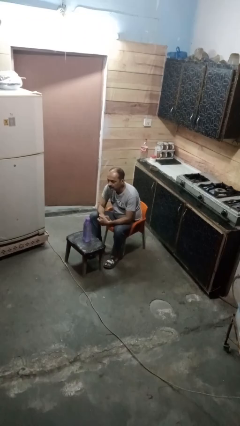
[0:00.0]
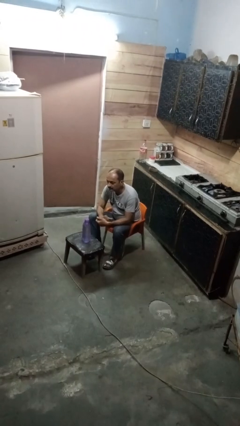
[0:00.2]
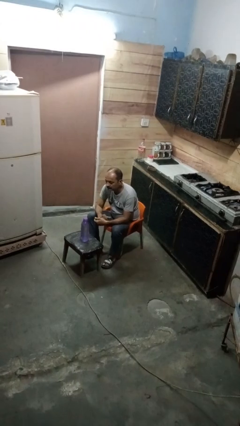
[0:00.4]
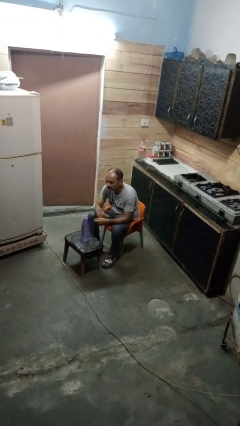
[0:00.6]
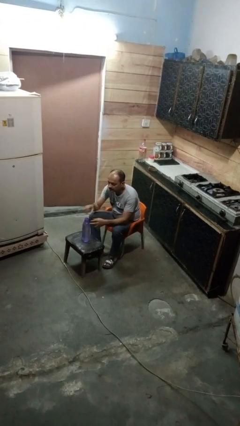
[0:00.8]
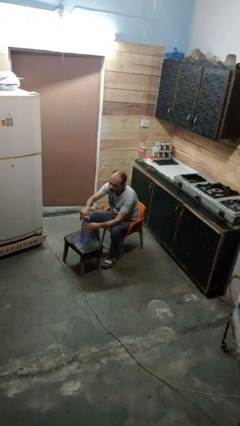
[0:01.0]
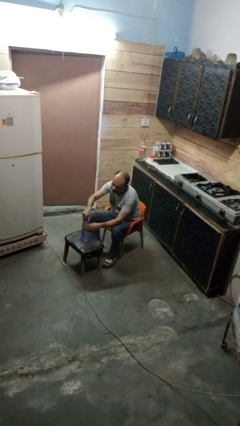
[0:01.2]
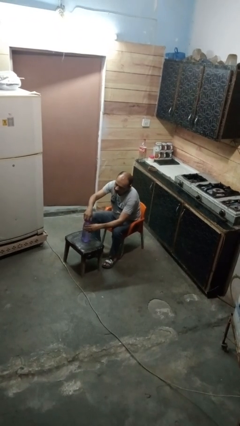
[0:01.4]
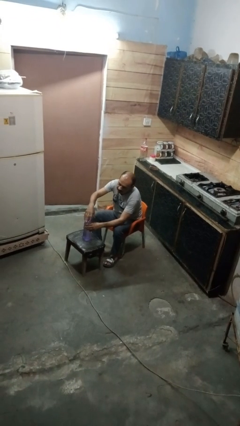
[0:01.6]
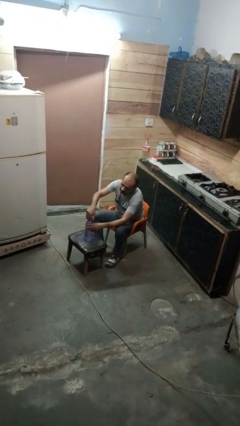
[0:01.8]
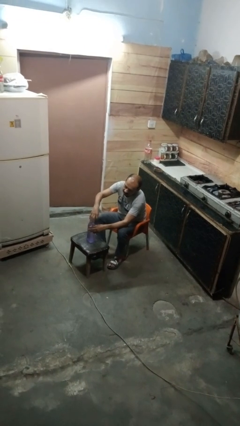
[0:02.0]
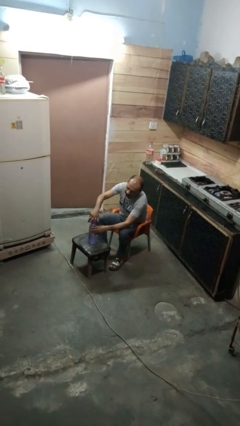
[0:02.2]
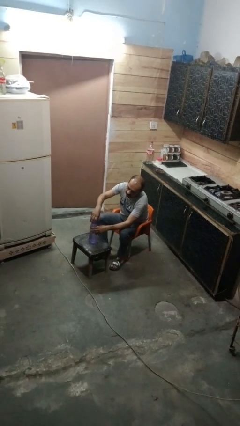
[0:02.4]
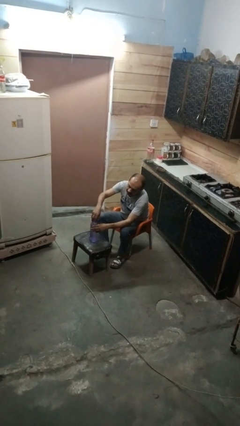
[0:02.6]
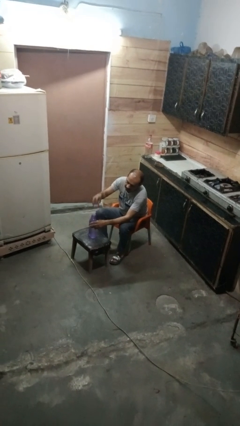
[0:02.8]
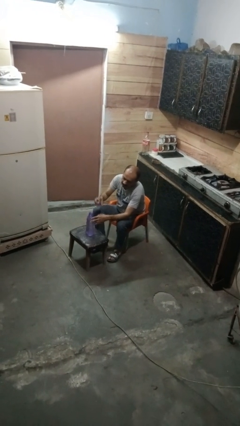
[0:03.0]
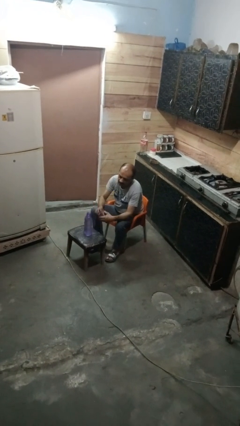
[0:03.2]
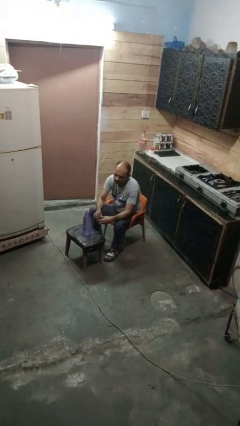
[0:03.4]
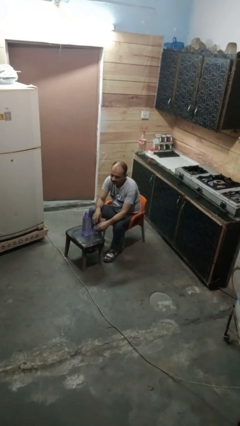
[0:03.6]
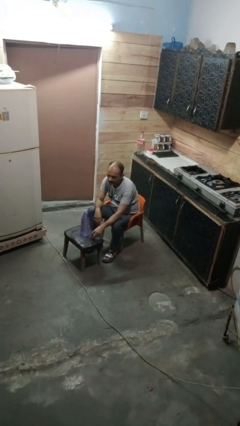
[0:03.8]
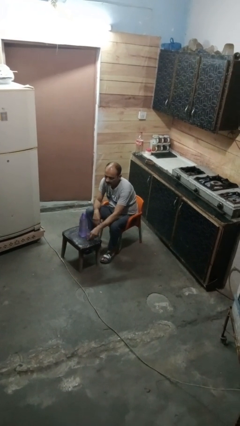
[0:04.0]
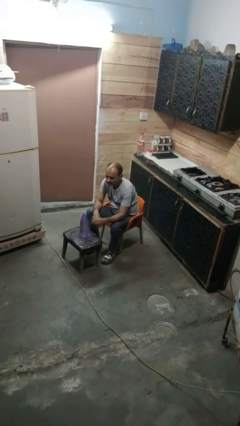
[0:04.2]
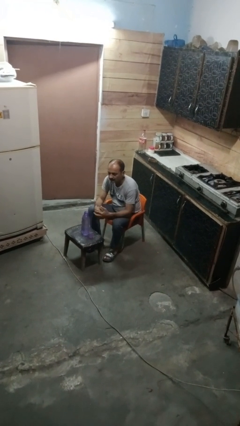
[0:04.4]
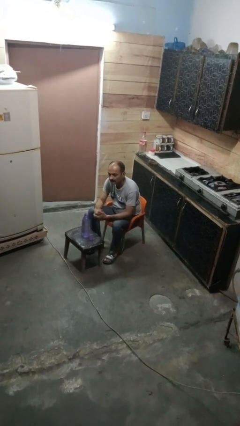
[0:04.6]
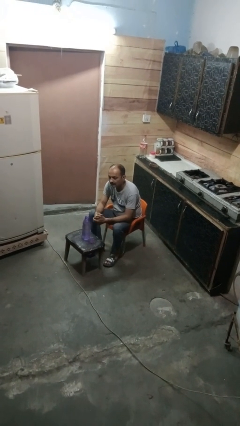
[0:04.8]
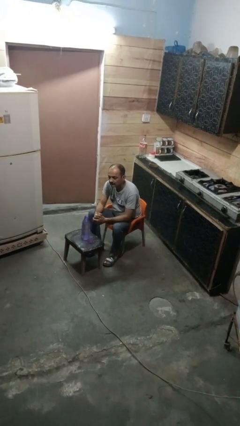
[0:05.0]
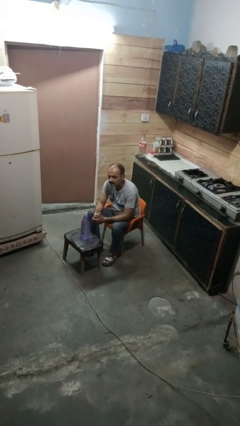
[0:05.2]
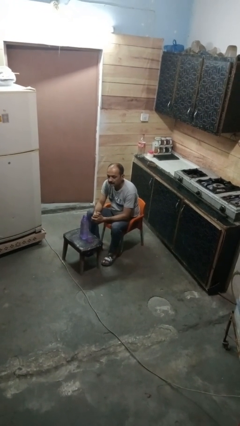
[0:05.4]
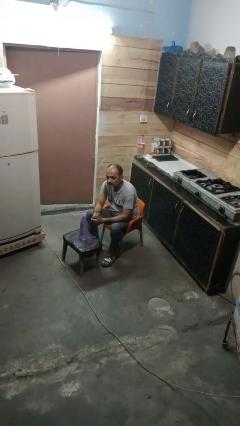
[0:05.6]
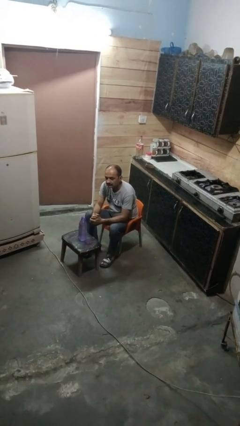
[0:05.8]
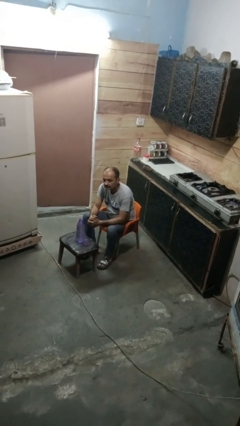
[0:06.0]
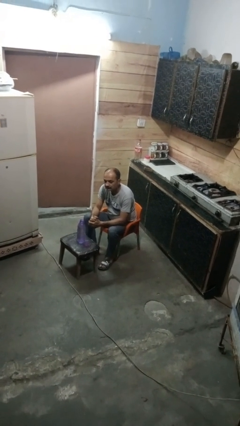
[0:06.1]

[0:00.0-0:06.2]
person unscrews lid from bottle

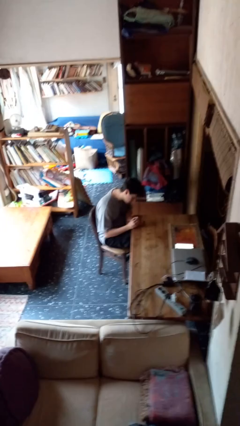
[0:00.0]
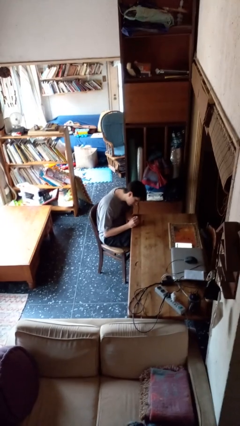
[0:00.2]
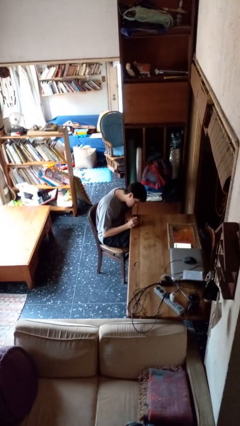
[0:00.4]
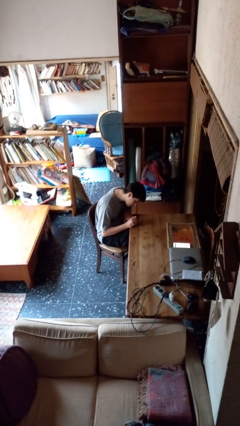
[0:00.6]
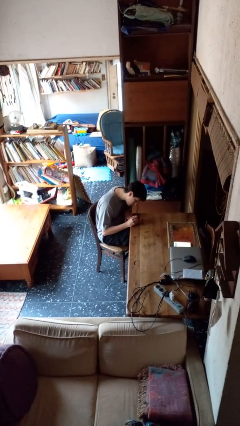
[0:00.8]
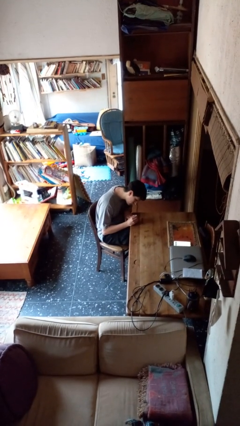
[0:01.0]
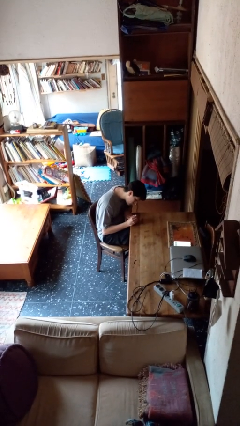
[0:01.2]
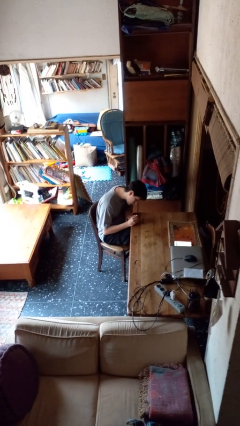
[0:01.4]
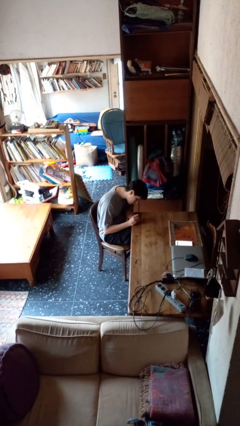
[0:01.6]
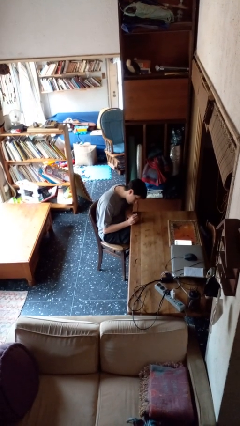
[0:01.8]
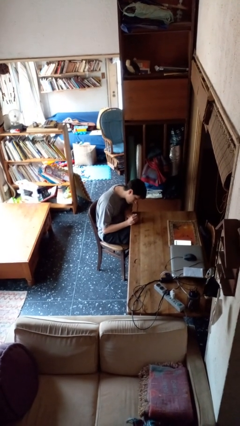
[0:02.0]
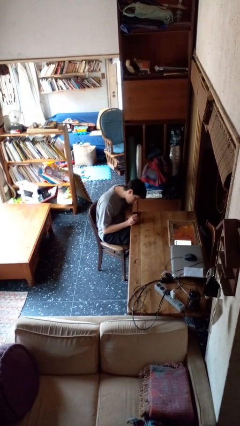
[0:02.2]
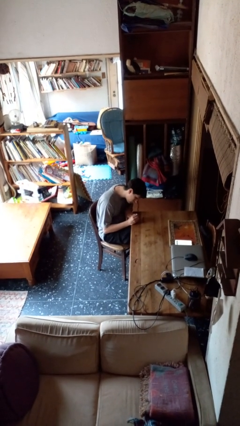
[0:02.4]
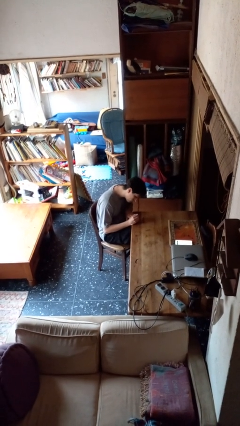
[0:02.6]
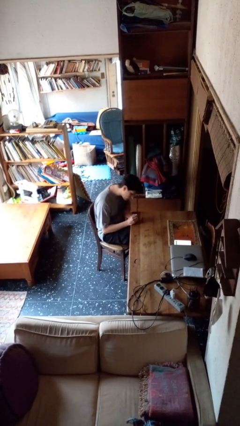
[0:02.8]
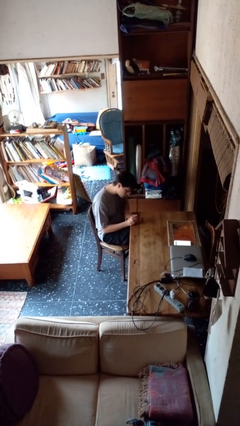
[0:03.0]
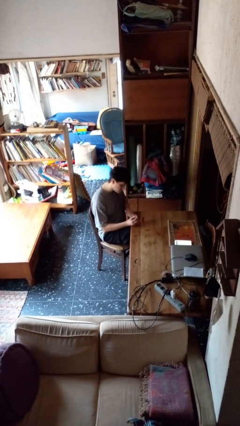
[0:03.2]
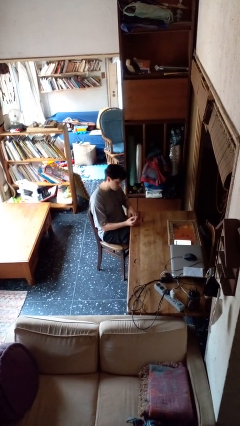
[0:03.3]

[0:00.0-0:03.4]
person paints fingernails

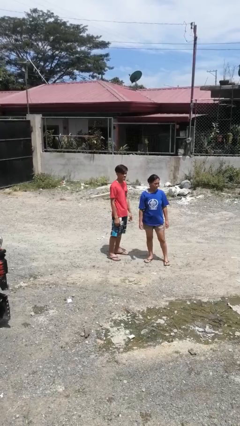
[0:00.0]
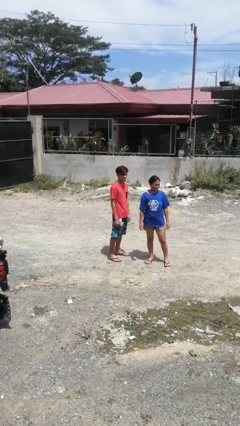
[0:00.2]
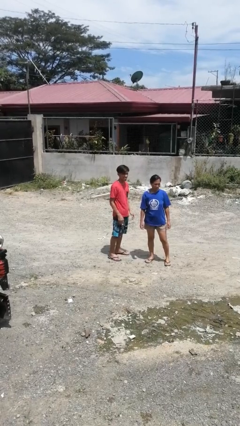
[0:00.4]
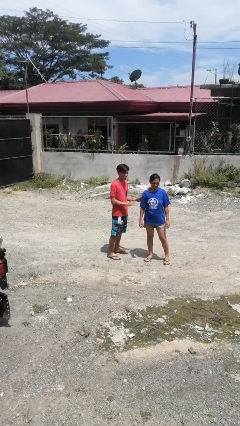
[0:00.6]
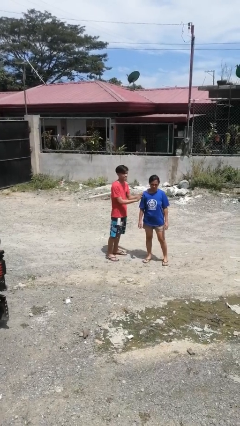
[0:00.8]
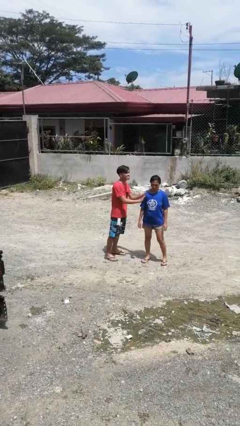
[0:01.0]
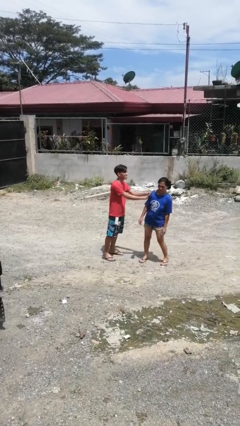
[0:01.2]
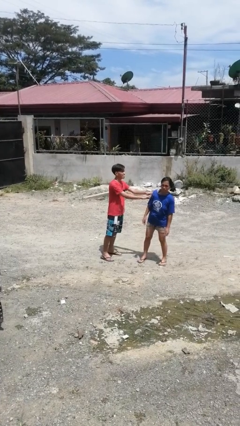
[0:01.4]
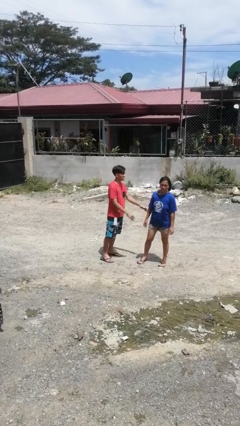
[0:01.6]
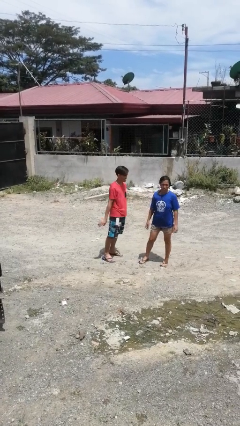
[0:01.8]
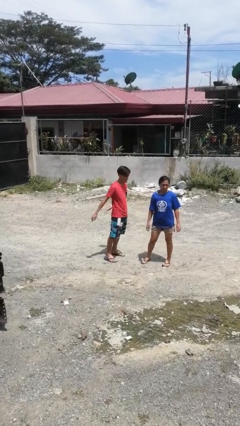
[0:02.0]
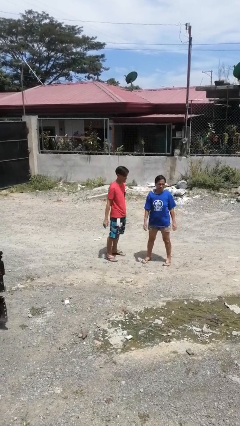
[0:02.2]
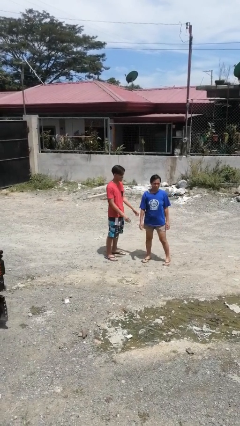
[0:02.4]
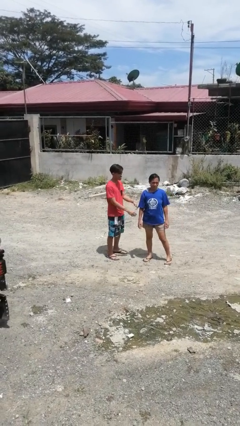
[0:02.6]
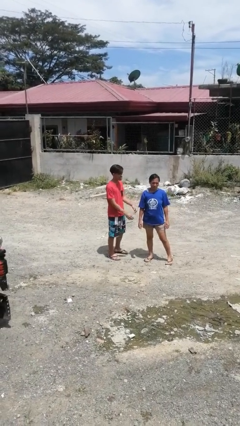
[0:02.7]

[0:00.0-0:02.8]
person shoves person

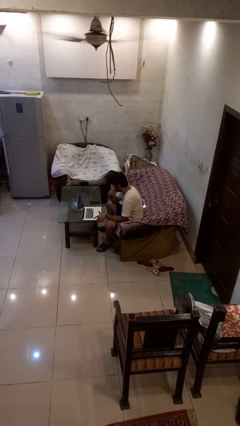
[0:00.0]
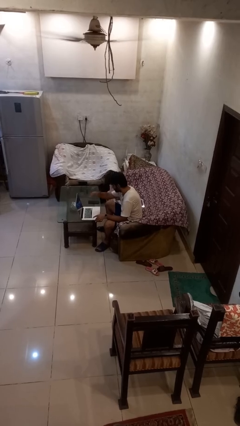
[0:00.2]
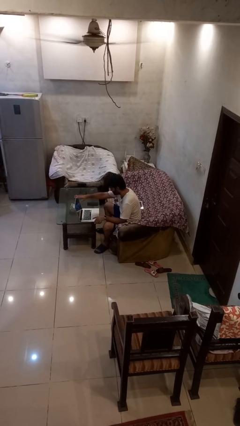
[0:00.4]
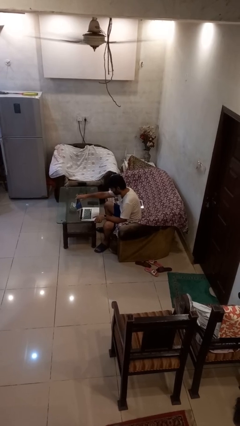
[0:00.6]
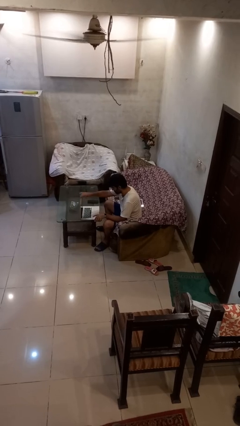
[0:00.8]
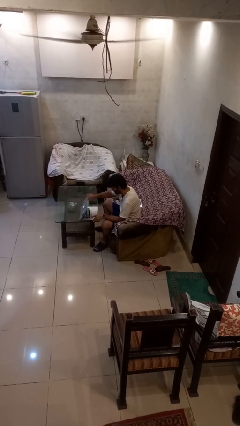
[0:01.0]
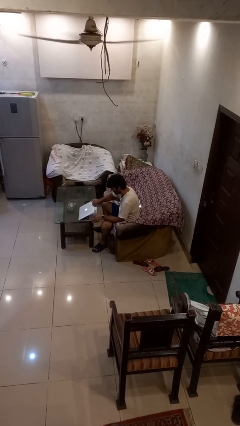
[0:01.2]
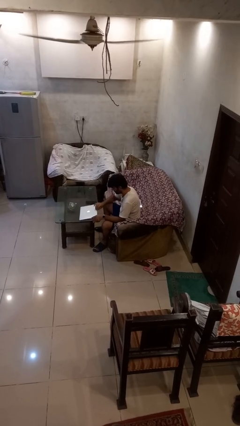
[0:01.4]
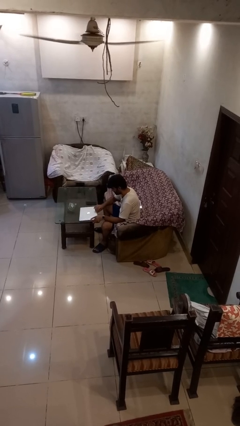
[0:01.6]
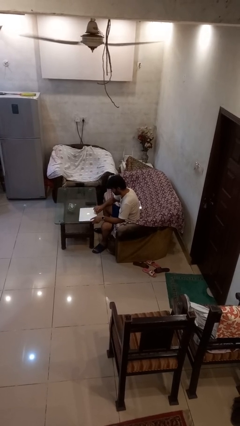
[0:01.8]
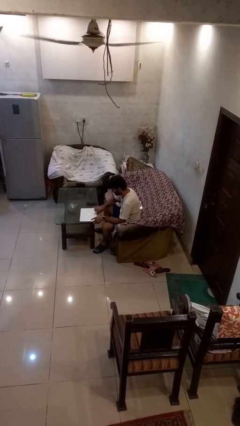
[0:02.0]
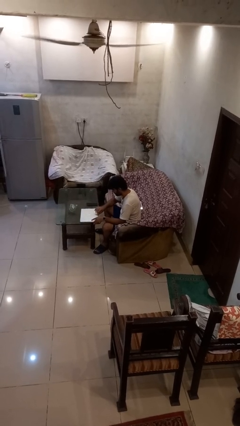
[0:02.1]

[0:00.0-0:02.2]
person closes laptop

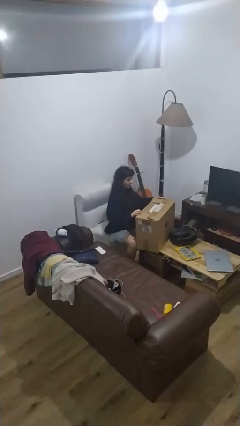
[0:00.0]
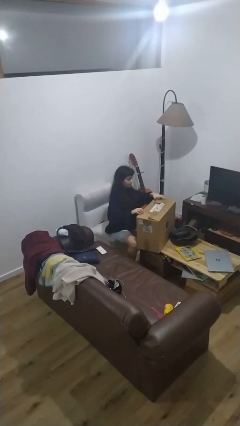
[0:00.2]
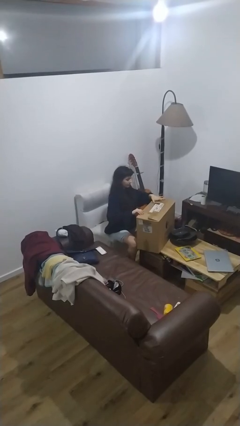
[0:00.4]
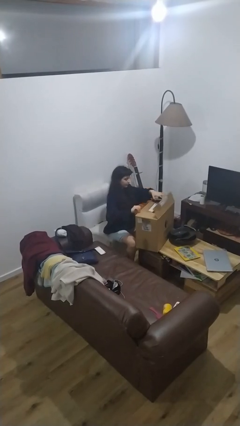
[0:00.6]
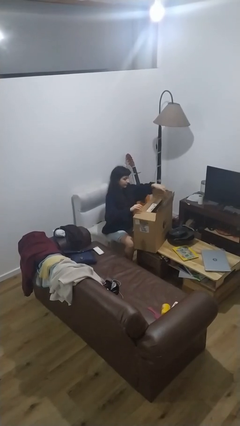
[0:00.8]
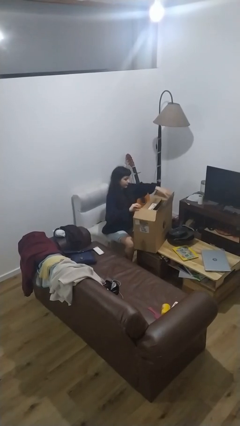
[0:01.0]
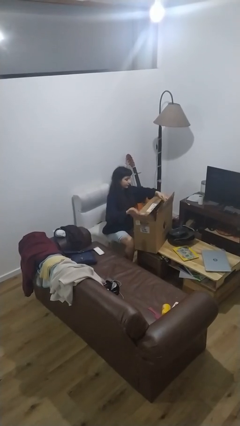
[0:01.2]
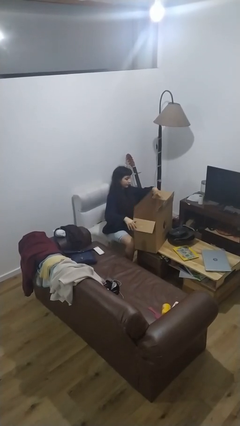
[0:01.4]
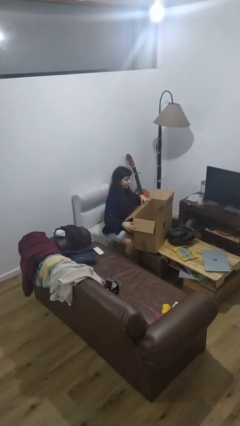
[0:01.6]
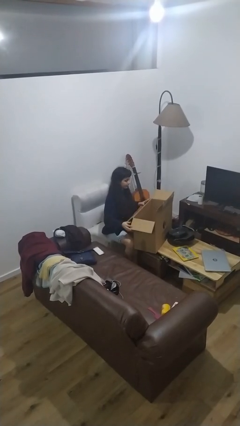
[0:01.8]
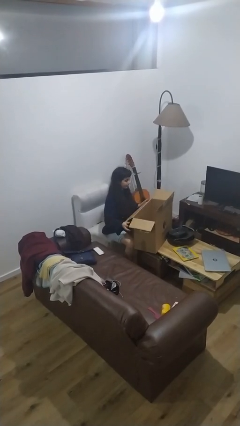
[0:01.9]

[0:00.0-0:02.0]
person opens box

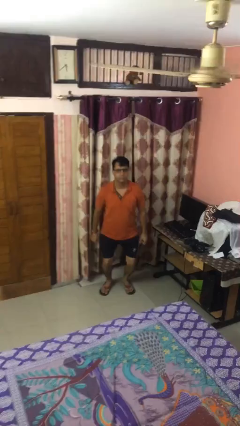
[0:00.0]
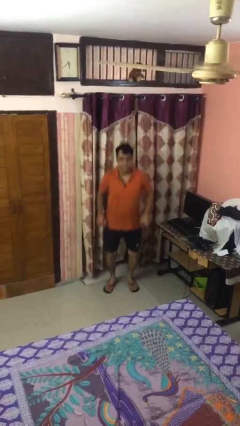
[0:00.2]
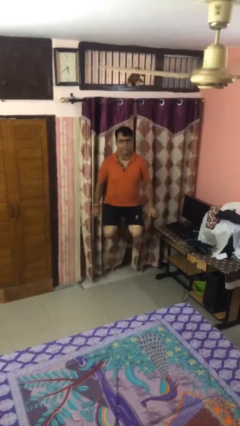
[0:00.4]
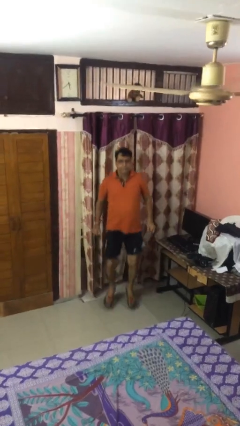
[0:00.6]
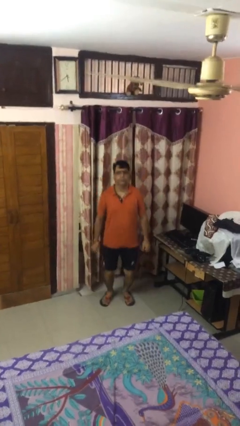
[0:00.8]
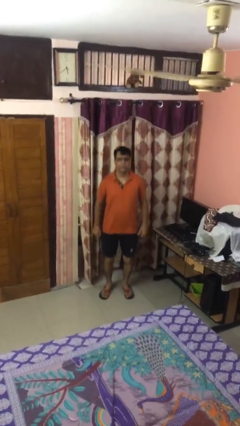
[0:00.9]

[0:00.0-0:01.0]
person jumps
